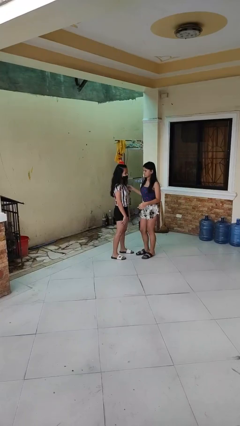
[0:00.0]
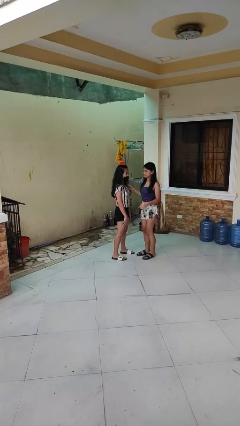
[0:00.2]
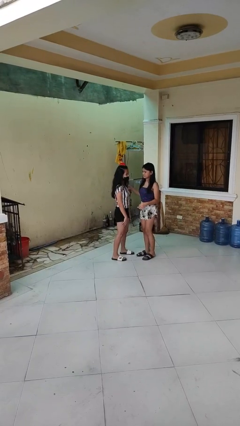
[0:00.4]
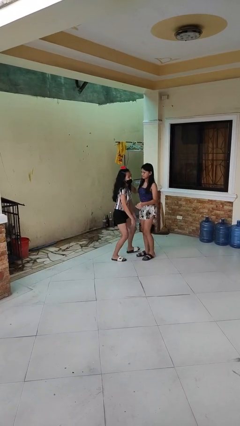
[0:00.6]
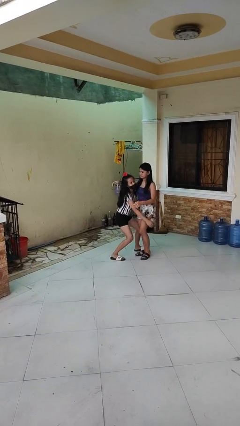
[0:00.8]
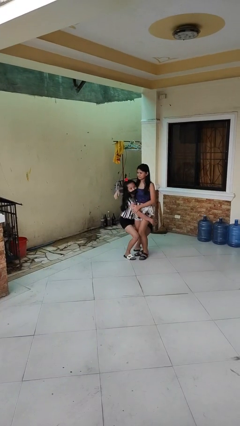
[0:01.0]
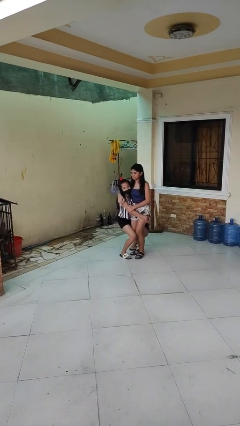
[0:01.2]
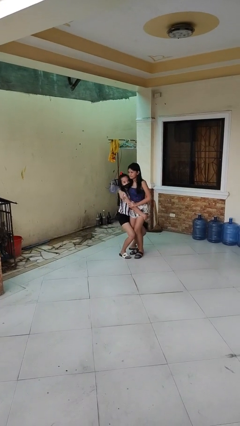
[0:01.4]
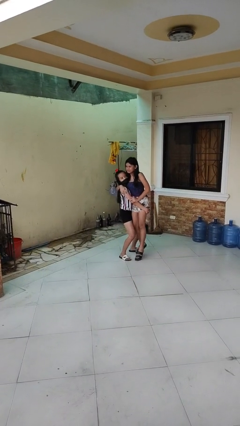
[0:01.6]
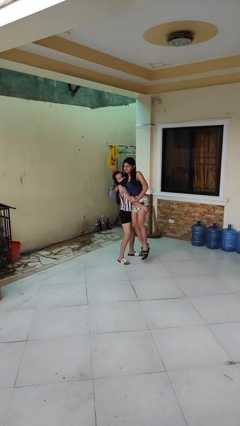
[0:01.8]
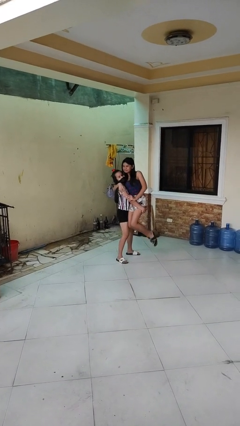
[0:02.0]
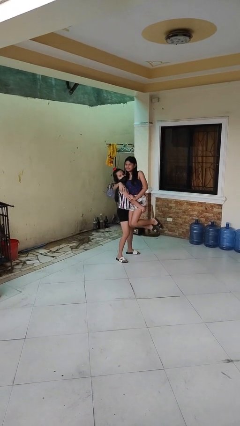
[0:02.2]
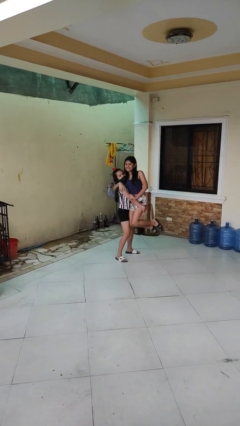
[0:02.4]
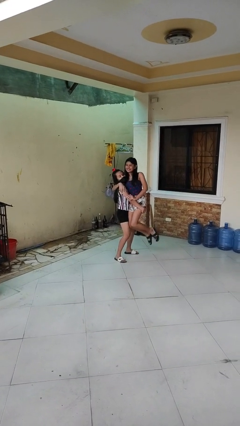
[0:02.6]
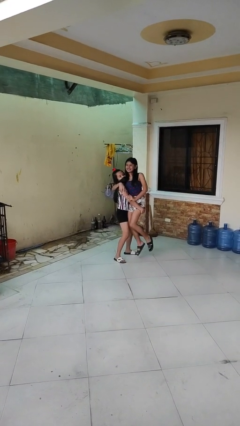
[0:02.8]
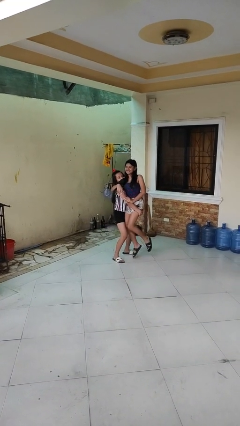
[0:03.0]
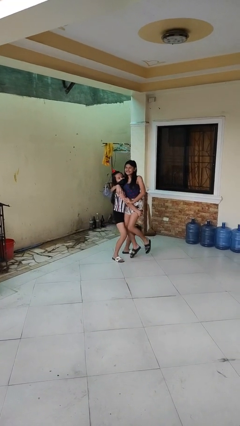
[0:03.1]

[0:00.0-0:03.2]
person picks up person

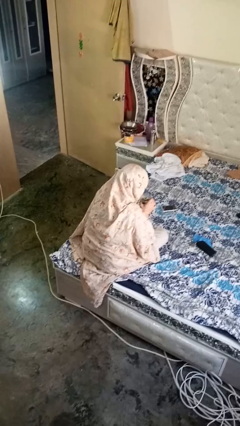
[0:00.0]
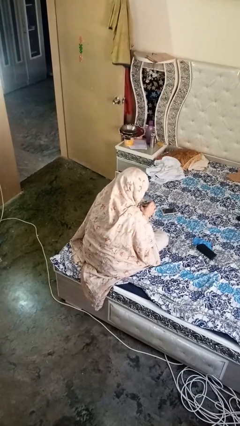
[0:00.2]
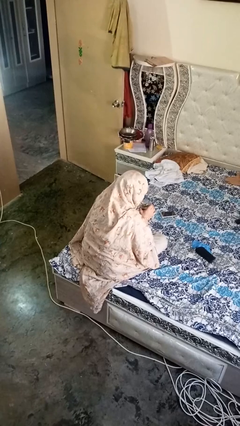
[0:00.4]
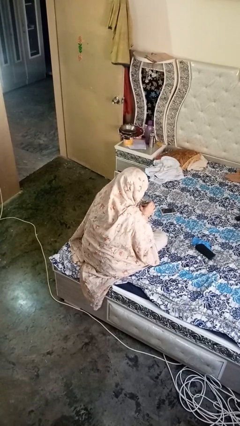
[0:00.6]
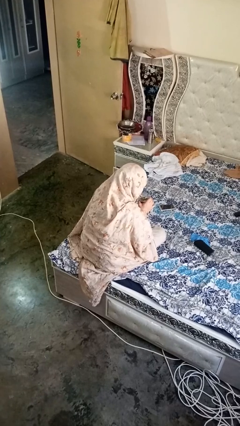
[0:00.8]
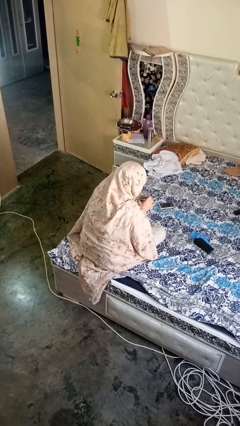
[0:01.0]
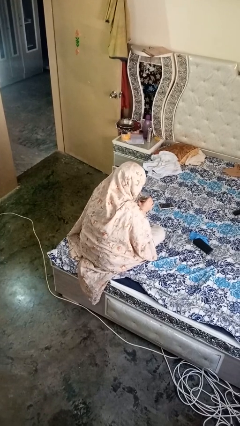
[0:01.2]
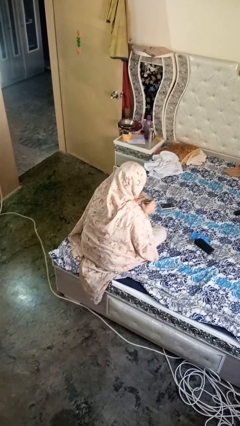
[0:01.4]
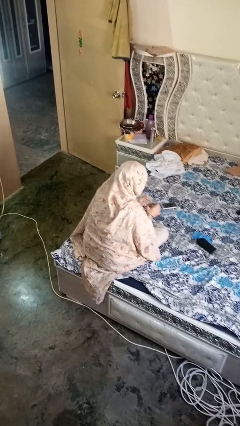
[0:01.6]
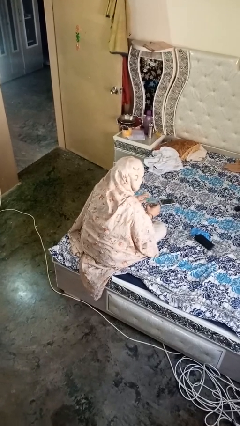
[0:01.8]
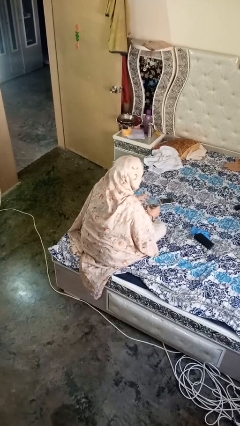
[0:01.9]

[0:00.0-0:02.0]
person drinks from straw

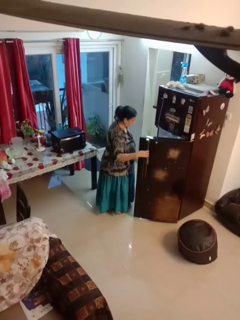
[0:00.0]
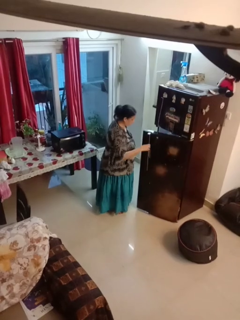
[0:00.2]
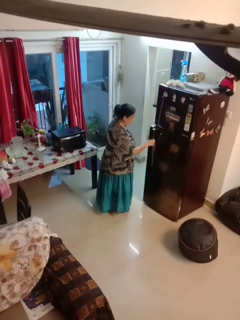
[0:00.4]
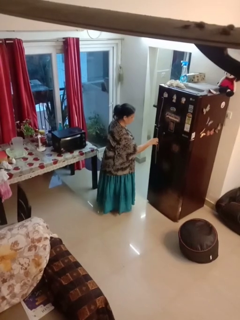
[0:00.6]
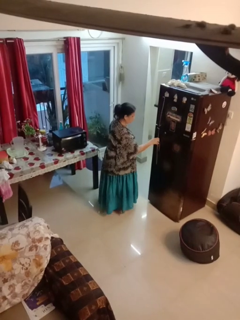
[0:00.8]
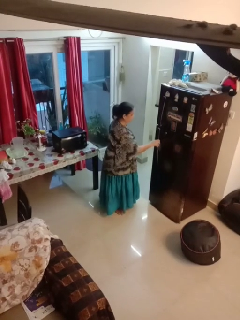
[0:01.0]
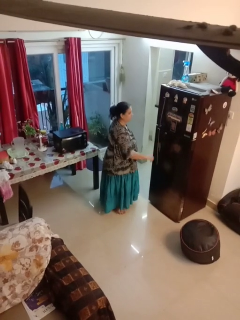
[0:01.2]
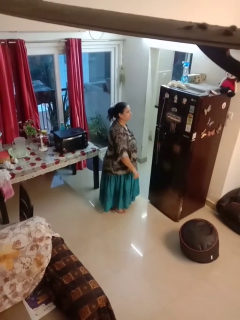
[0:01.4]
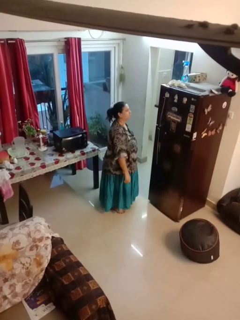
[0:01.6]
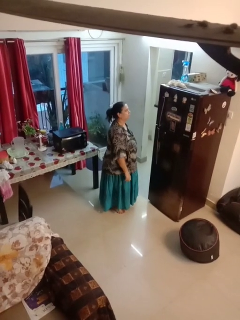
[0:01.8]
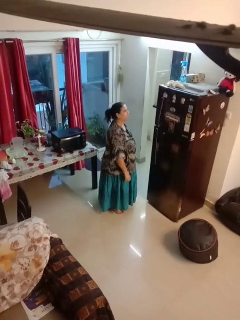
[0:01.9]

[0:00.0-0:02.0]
person closes refrigerator

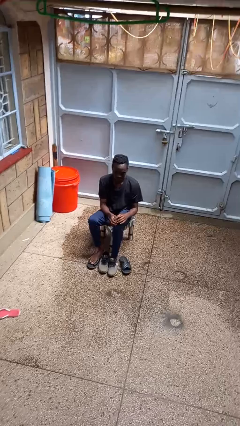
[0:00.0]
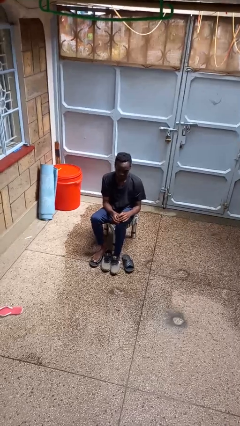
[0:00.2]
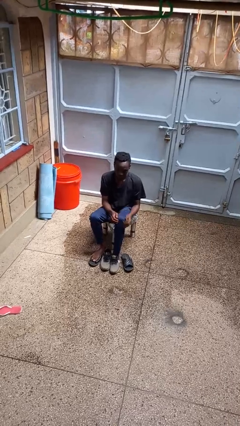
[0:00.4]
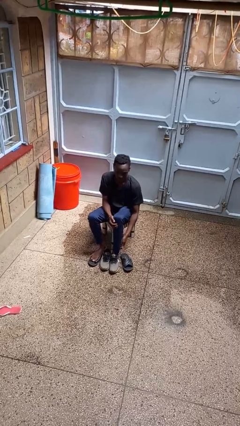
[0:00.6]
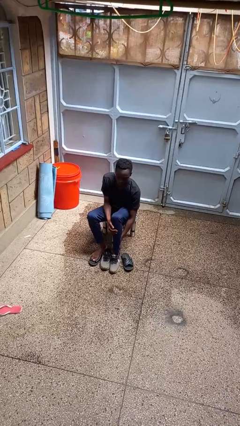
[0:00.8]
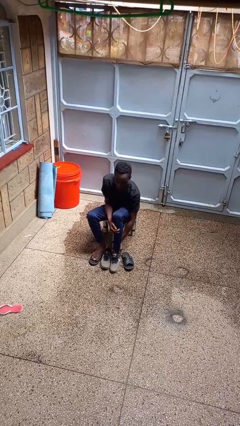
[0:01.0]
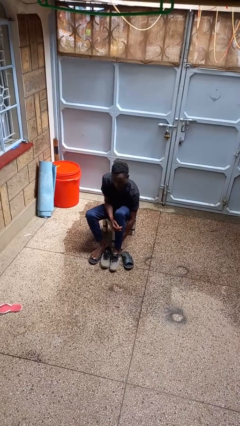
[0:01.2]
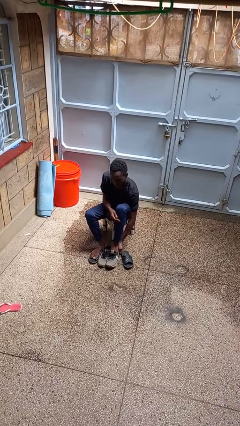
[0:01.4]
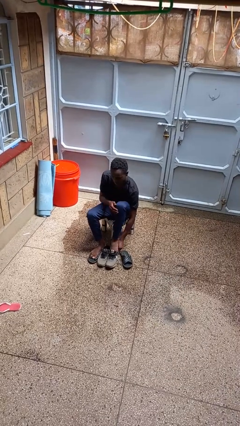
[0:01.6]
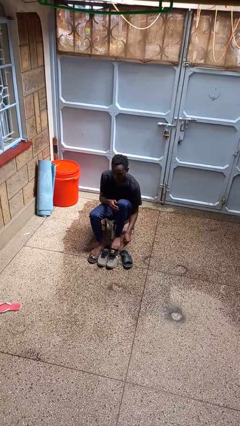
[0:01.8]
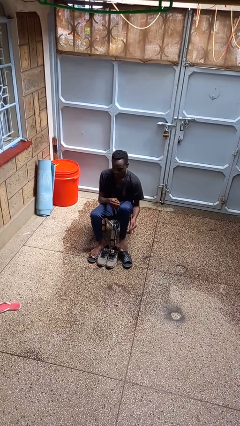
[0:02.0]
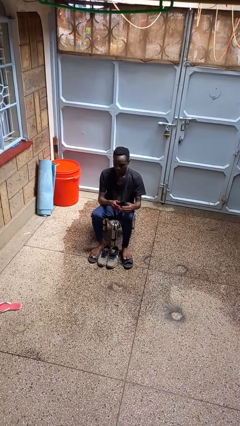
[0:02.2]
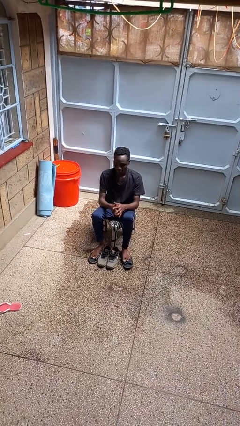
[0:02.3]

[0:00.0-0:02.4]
person takes off shoes

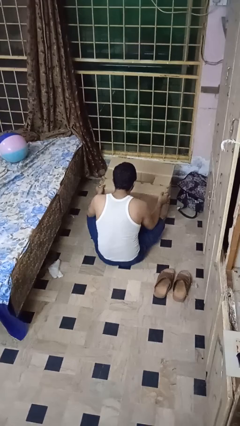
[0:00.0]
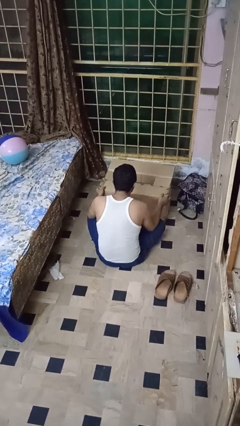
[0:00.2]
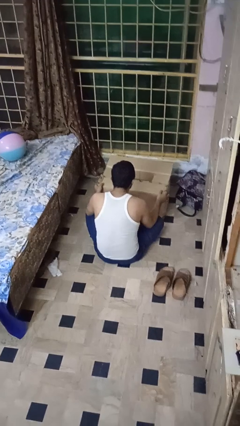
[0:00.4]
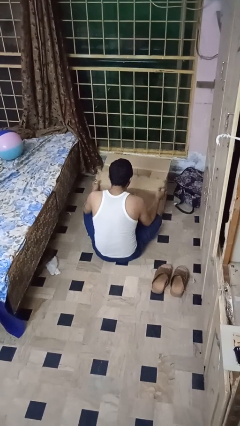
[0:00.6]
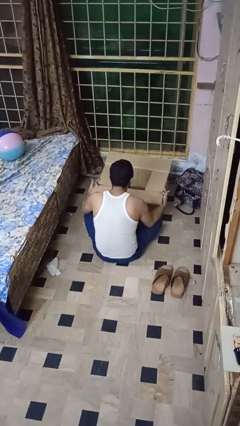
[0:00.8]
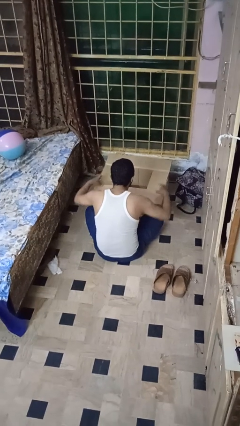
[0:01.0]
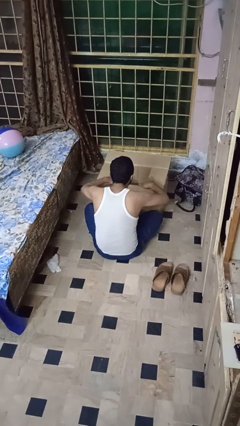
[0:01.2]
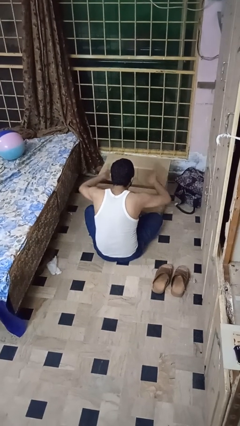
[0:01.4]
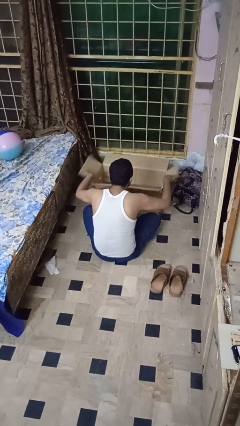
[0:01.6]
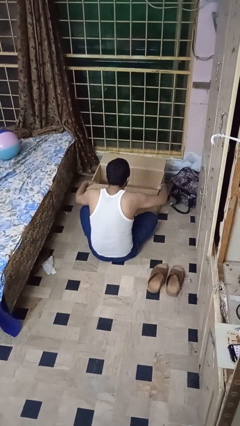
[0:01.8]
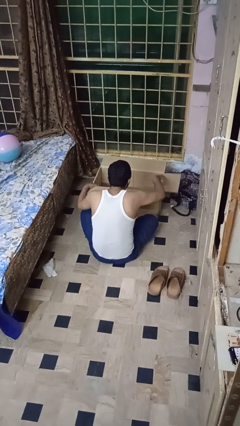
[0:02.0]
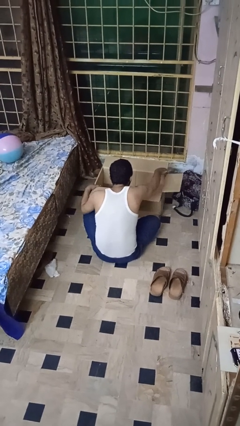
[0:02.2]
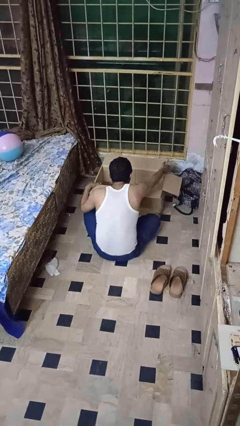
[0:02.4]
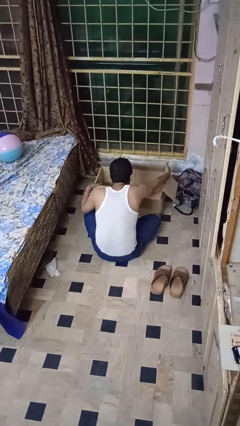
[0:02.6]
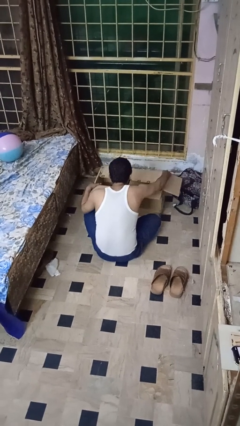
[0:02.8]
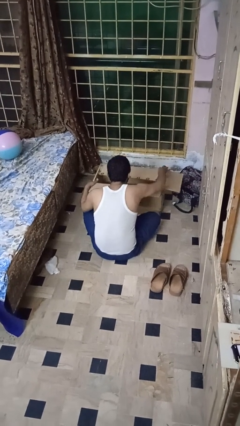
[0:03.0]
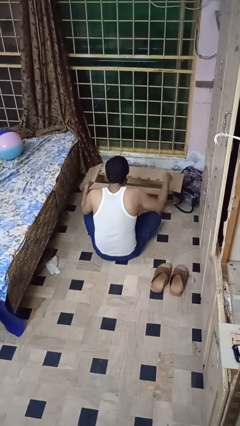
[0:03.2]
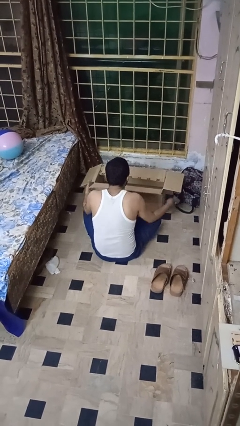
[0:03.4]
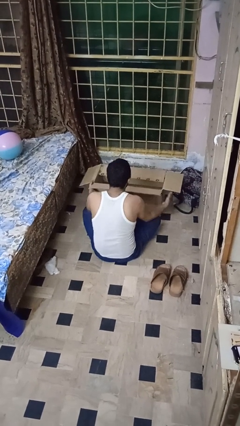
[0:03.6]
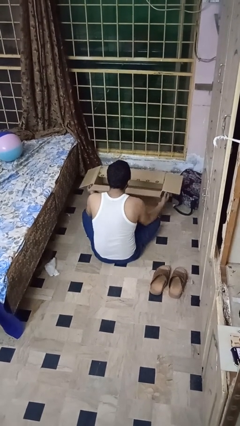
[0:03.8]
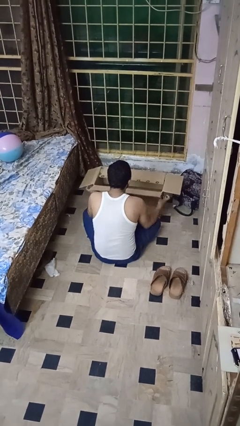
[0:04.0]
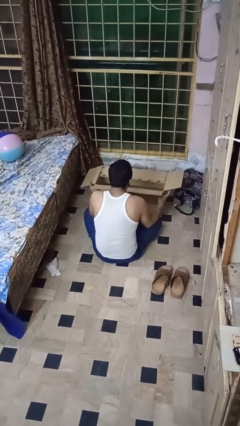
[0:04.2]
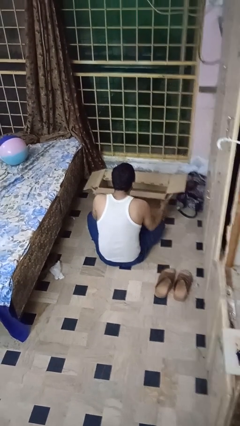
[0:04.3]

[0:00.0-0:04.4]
person opens box

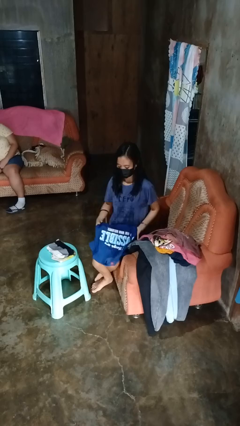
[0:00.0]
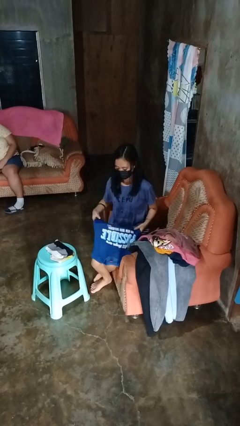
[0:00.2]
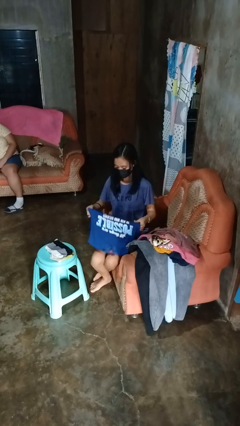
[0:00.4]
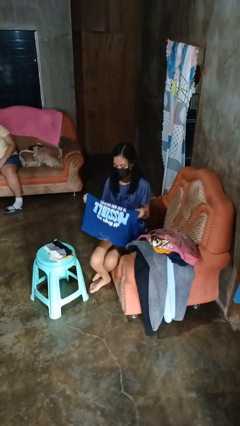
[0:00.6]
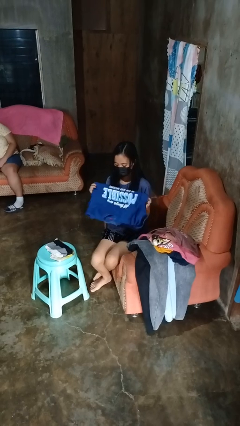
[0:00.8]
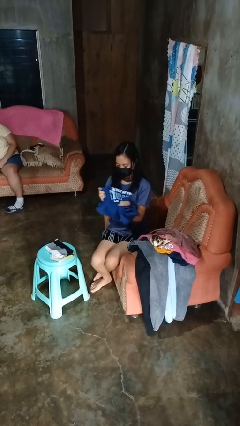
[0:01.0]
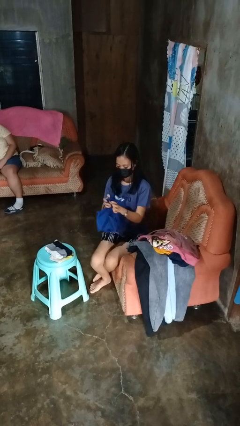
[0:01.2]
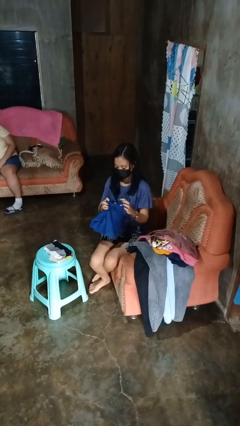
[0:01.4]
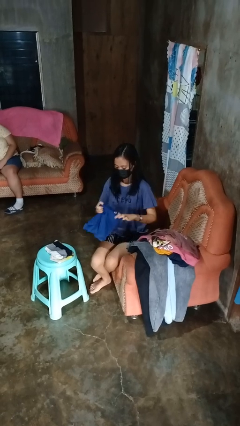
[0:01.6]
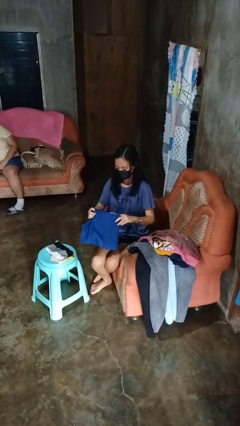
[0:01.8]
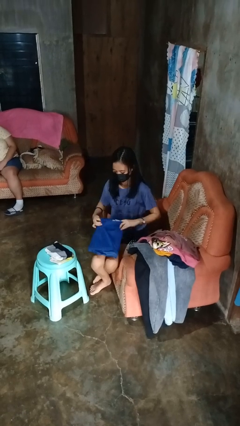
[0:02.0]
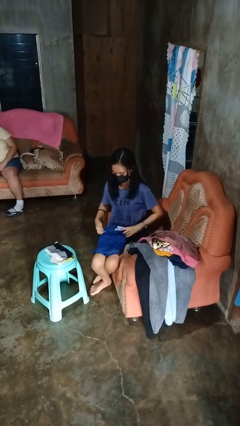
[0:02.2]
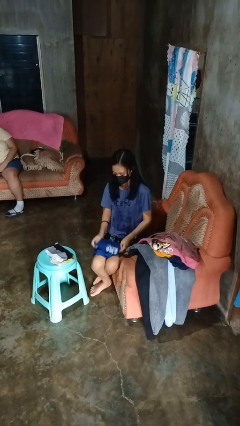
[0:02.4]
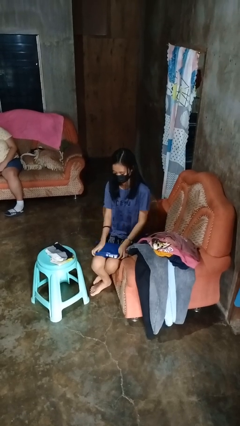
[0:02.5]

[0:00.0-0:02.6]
person folds shirt

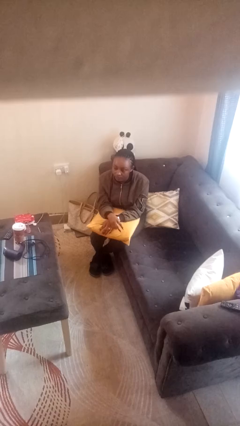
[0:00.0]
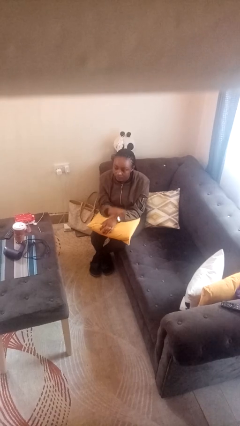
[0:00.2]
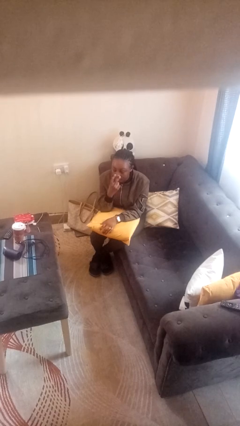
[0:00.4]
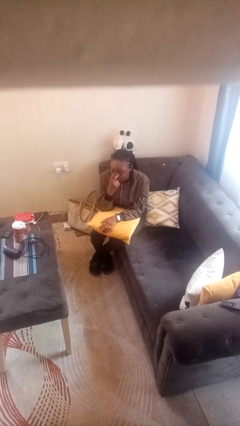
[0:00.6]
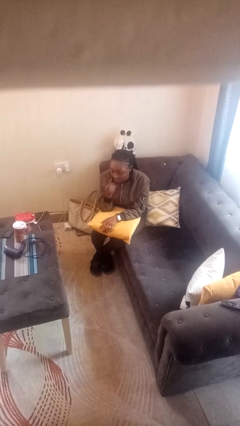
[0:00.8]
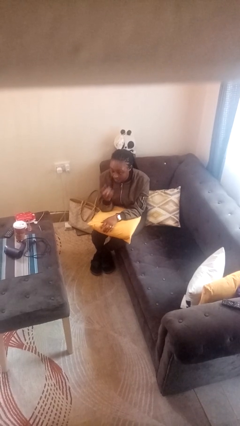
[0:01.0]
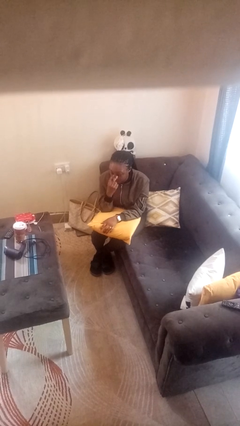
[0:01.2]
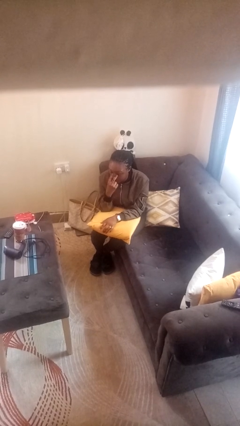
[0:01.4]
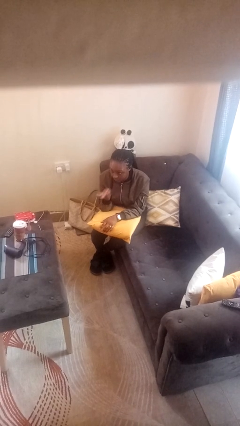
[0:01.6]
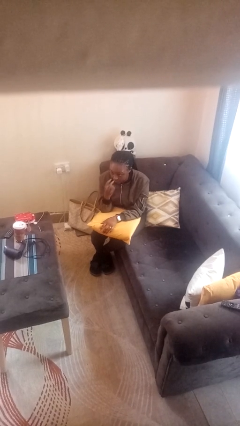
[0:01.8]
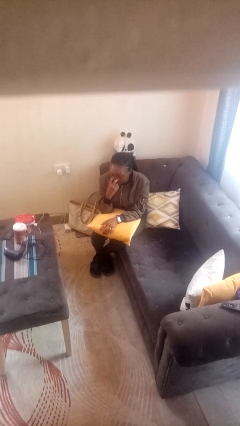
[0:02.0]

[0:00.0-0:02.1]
person gestures watch closely
